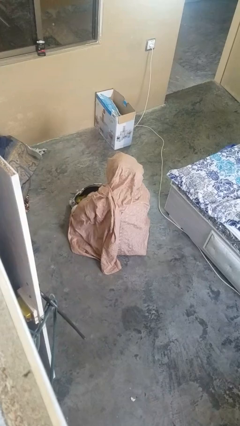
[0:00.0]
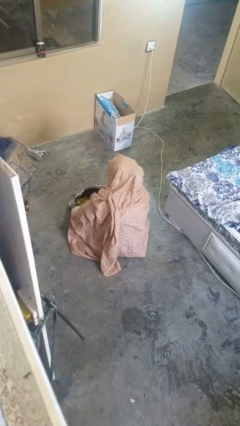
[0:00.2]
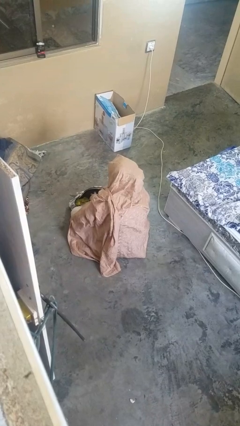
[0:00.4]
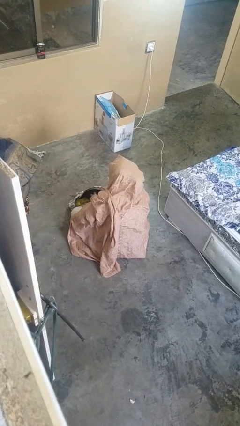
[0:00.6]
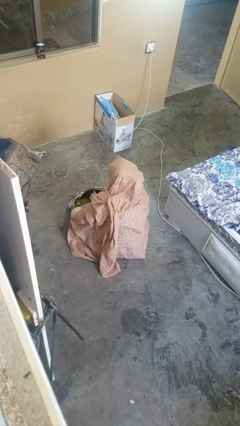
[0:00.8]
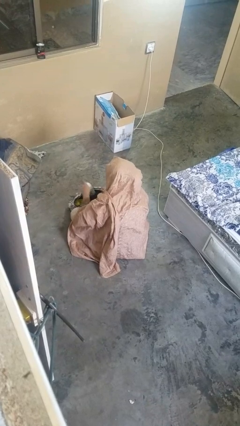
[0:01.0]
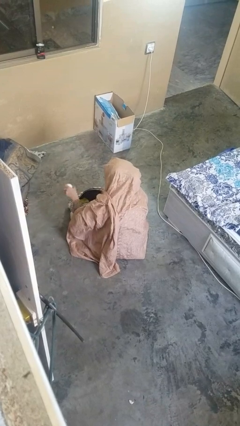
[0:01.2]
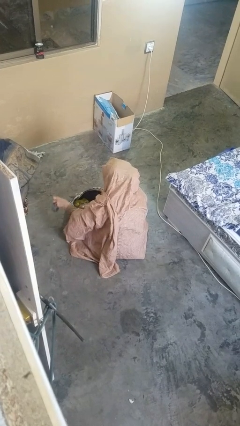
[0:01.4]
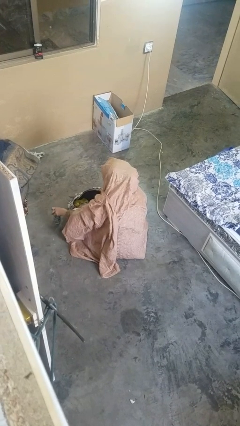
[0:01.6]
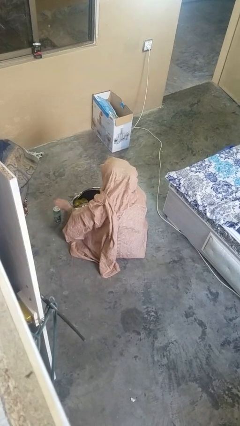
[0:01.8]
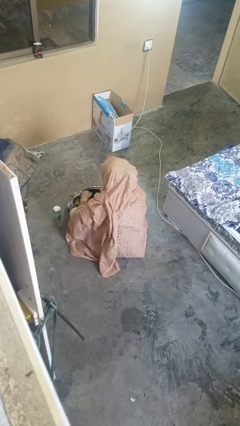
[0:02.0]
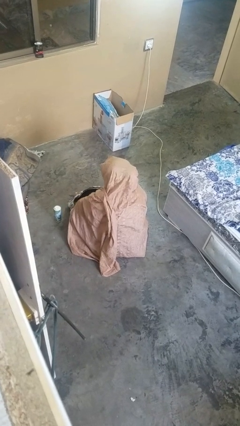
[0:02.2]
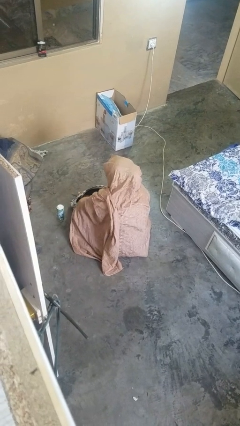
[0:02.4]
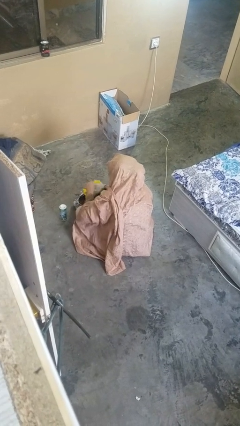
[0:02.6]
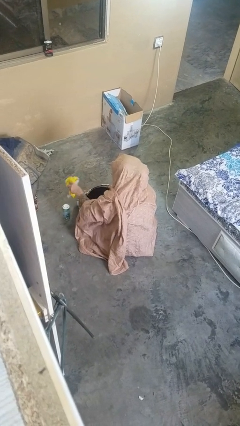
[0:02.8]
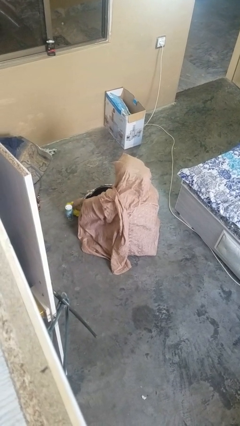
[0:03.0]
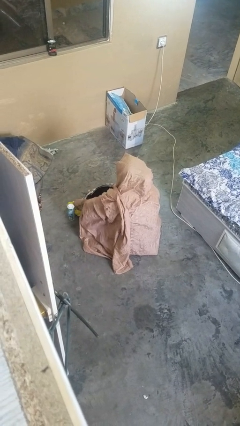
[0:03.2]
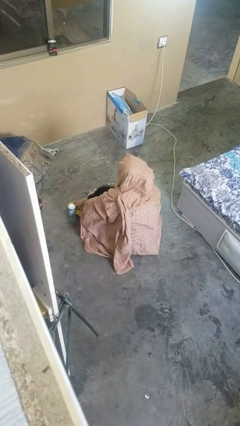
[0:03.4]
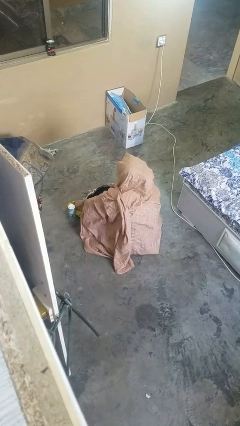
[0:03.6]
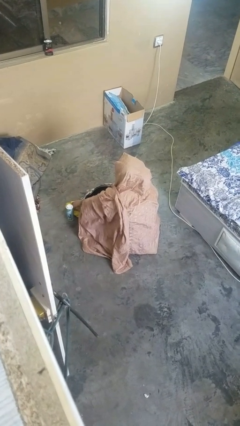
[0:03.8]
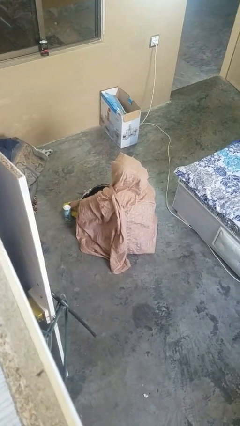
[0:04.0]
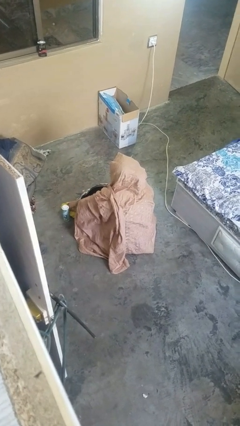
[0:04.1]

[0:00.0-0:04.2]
person takes object from purse

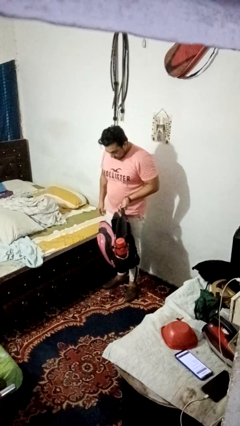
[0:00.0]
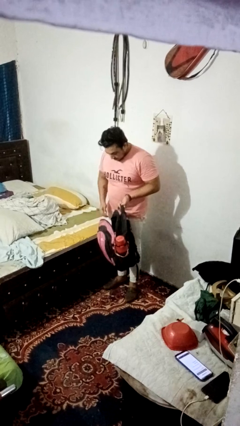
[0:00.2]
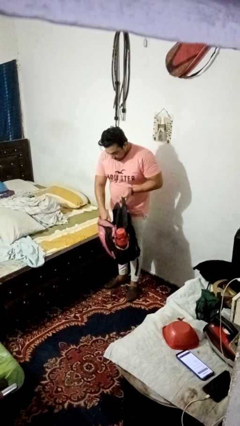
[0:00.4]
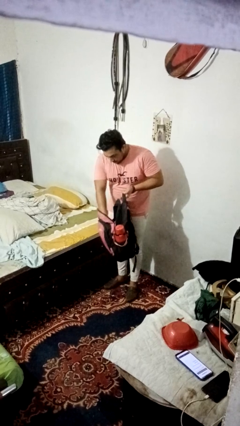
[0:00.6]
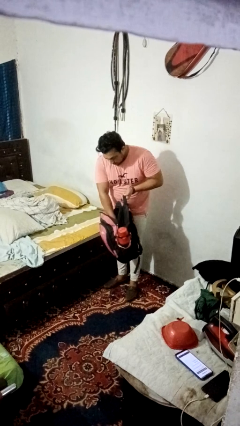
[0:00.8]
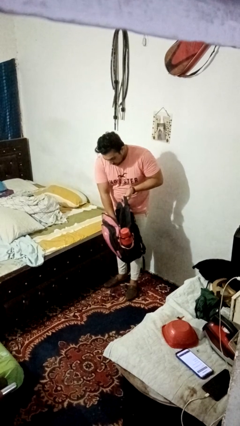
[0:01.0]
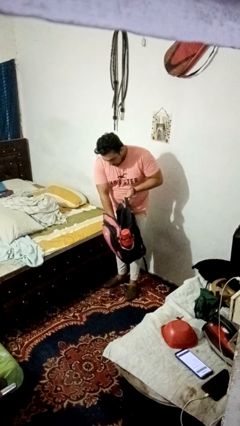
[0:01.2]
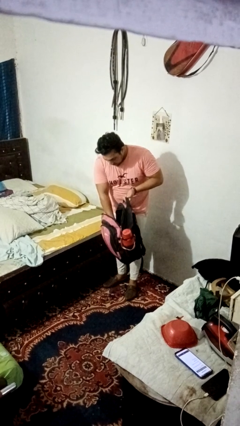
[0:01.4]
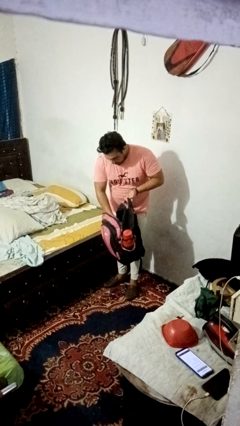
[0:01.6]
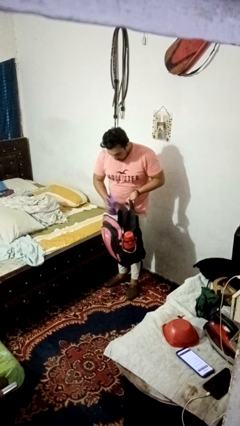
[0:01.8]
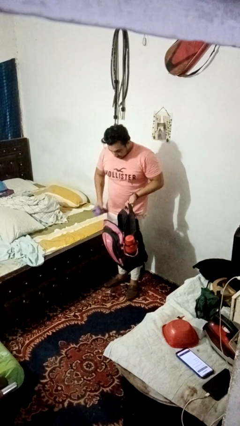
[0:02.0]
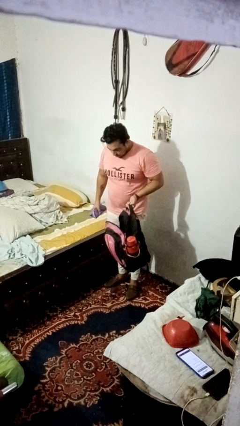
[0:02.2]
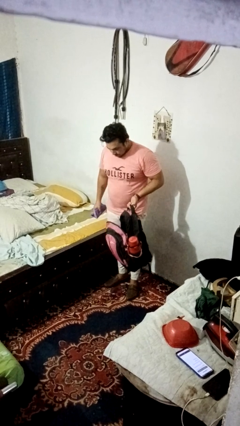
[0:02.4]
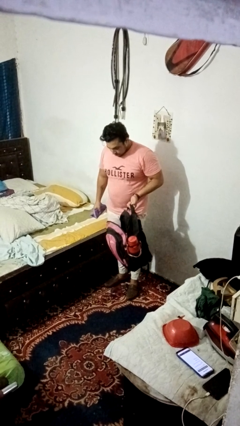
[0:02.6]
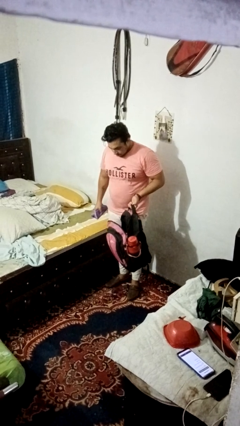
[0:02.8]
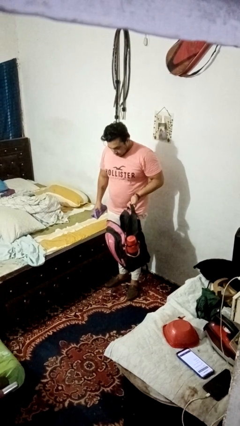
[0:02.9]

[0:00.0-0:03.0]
person takes object from bag

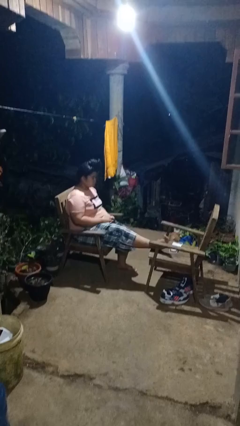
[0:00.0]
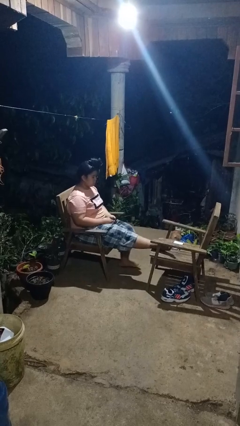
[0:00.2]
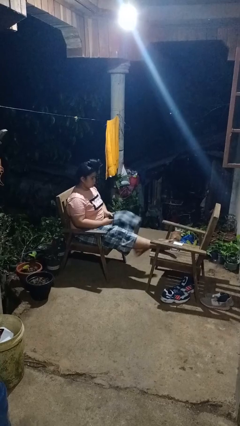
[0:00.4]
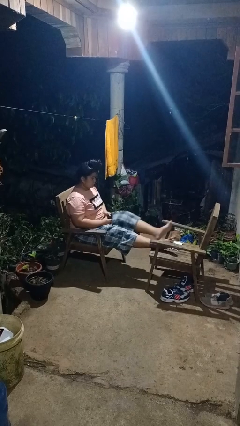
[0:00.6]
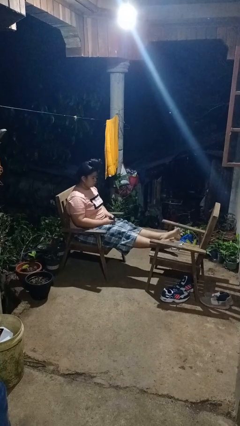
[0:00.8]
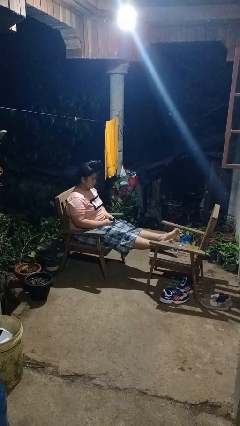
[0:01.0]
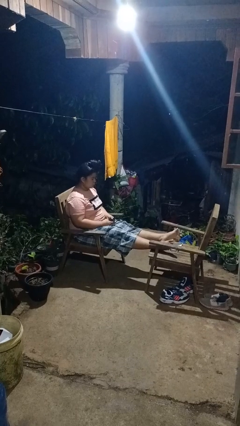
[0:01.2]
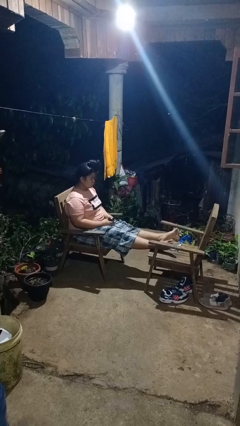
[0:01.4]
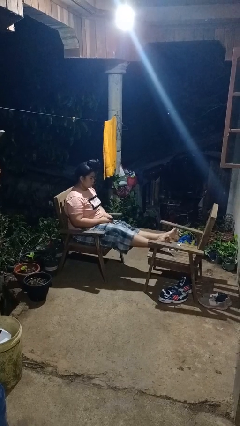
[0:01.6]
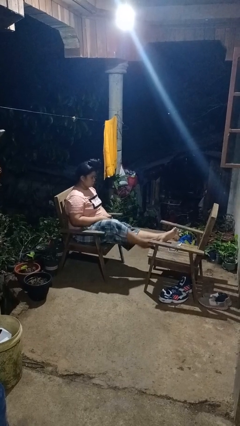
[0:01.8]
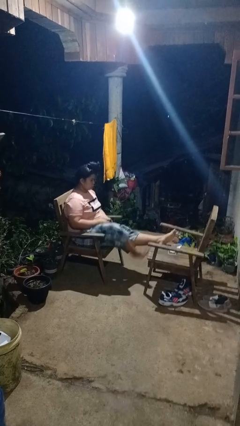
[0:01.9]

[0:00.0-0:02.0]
person puts feet up

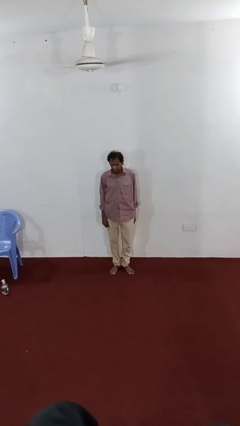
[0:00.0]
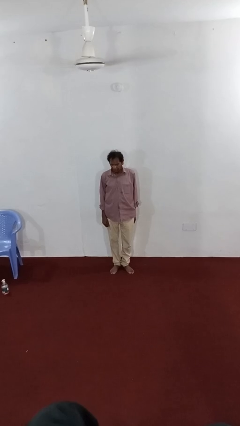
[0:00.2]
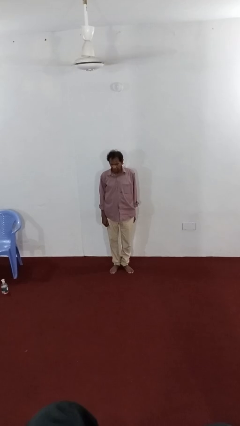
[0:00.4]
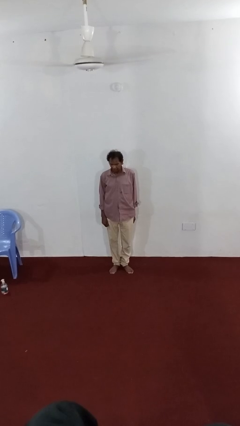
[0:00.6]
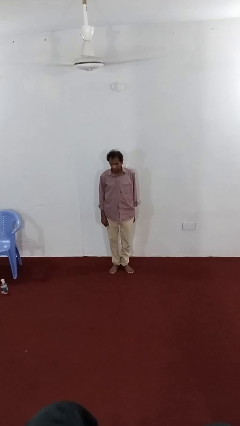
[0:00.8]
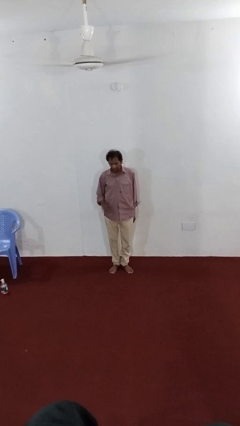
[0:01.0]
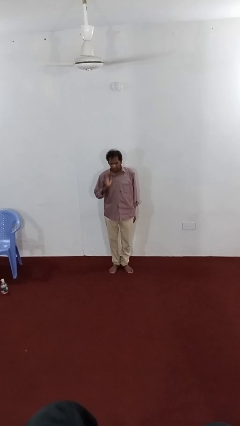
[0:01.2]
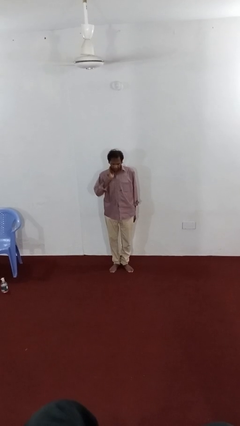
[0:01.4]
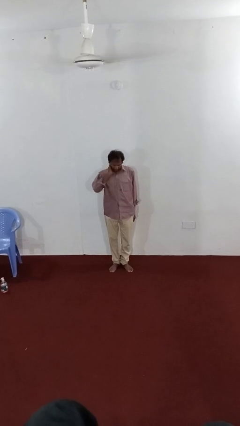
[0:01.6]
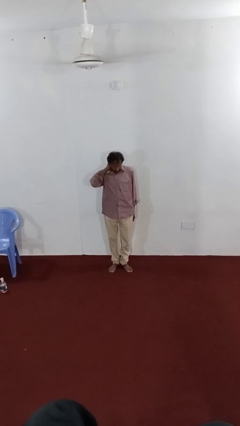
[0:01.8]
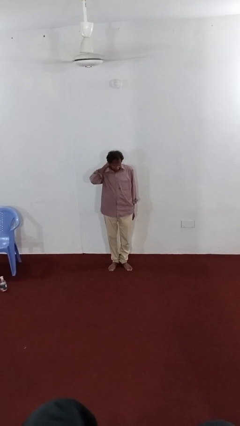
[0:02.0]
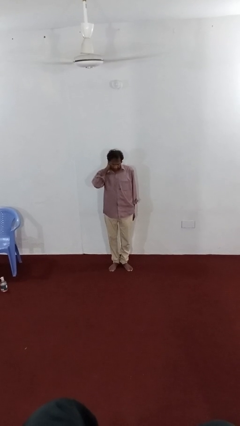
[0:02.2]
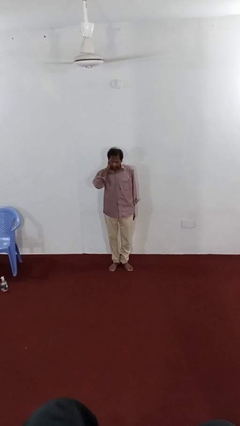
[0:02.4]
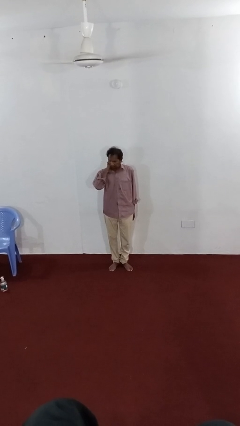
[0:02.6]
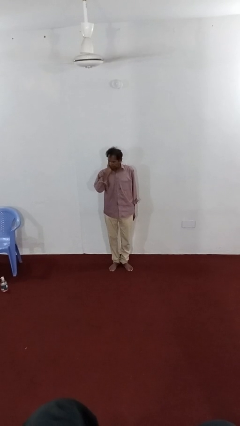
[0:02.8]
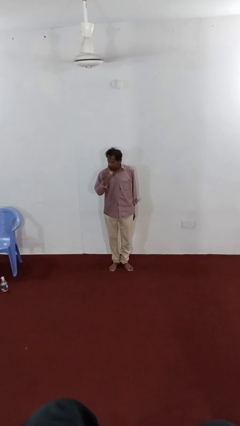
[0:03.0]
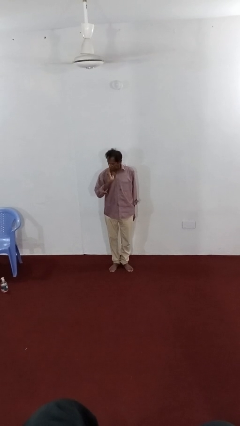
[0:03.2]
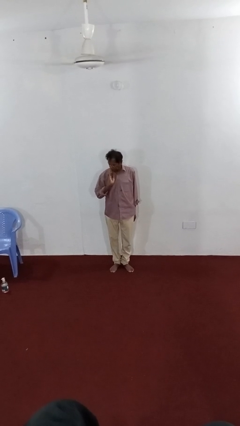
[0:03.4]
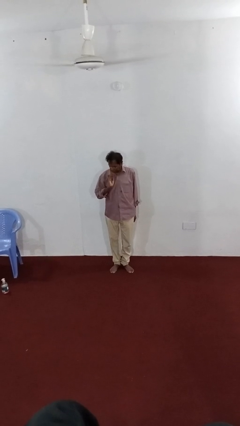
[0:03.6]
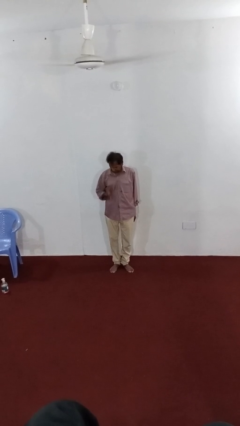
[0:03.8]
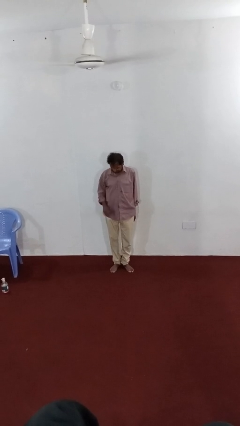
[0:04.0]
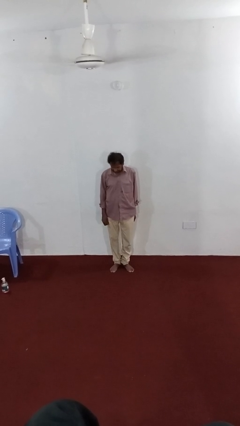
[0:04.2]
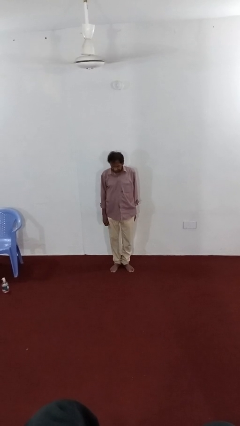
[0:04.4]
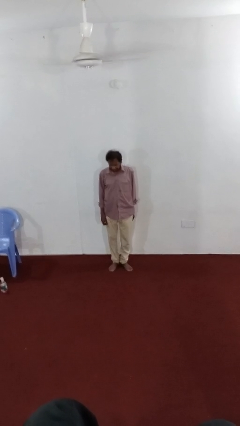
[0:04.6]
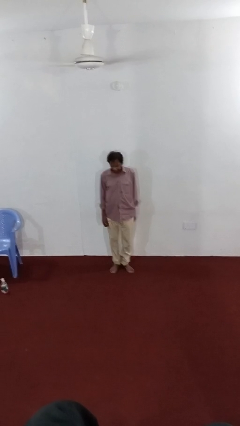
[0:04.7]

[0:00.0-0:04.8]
person rubs neck

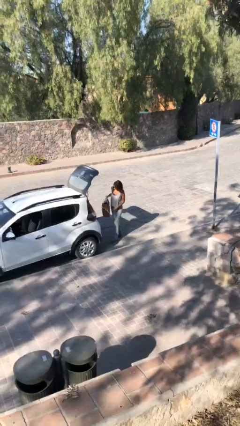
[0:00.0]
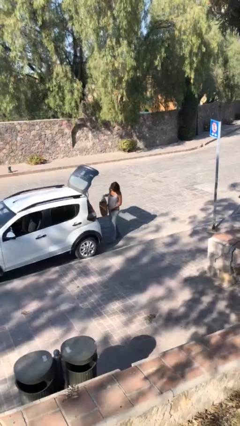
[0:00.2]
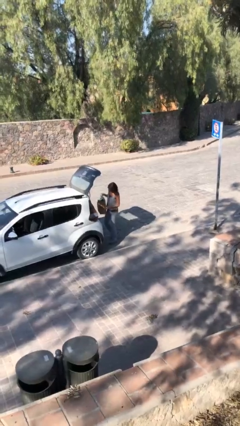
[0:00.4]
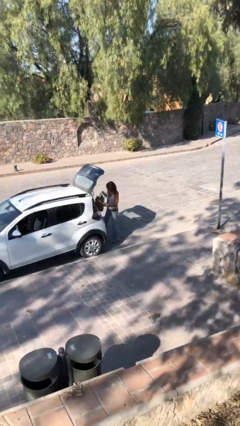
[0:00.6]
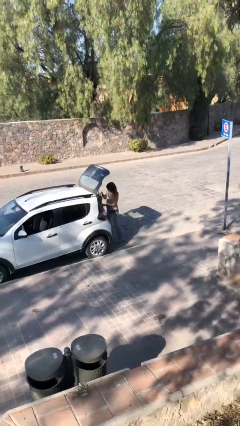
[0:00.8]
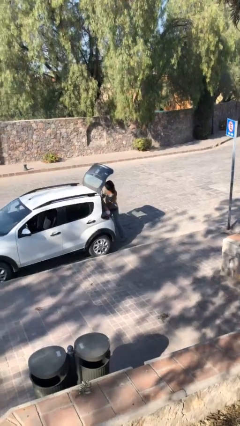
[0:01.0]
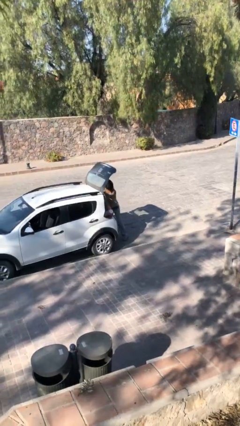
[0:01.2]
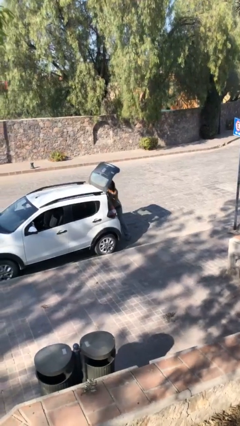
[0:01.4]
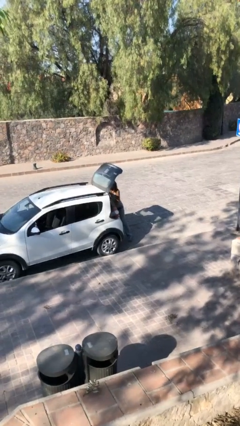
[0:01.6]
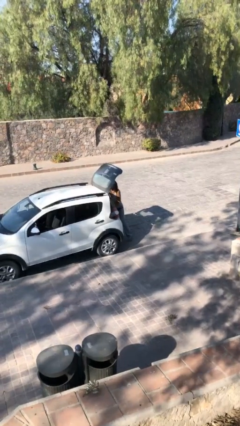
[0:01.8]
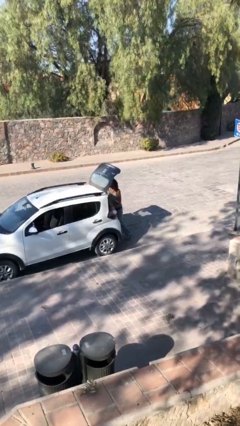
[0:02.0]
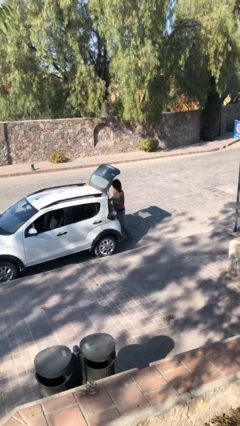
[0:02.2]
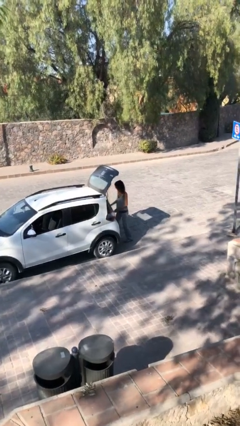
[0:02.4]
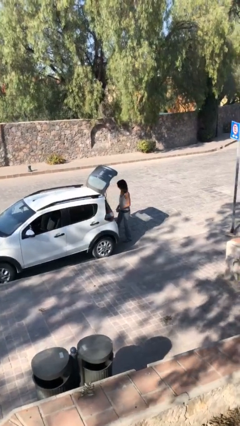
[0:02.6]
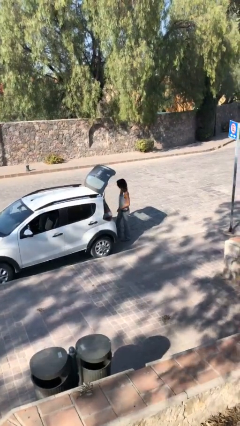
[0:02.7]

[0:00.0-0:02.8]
person loads car

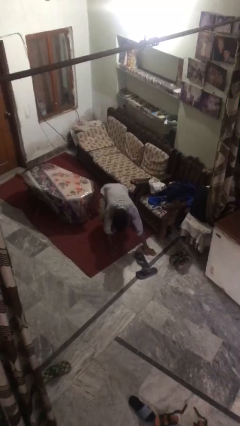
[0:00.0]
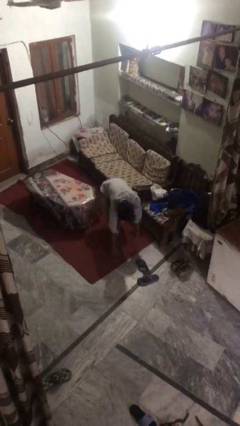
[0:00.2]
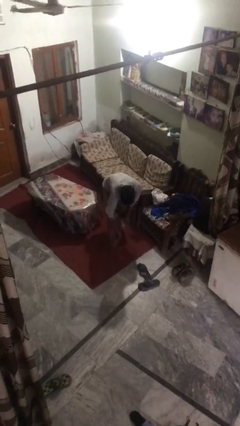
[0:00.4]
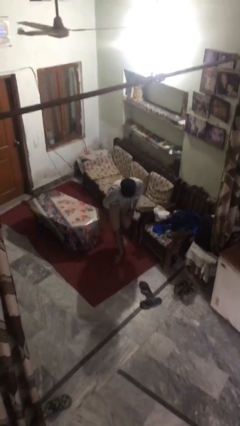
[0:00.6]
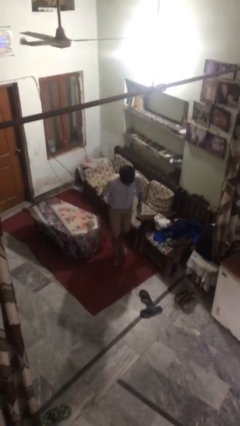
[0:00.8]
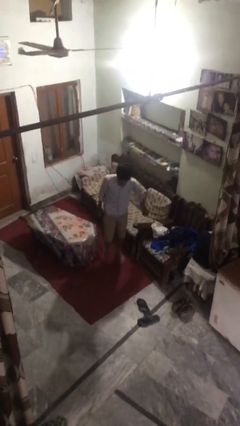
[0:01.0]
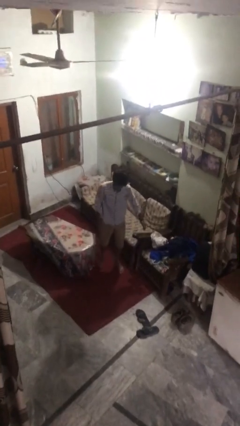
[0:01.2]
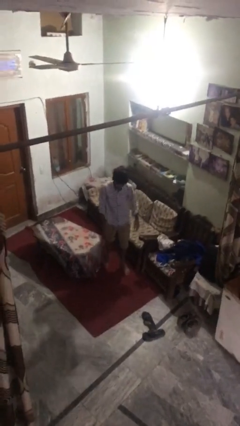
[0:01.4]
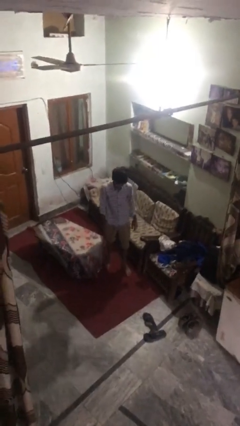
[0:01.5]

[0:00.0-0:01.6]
person stands up from floor
